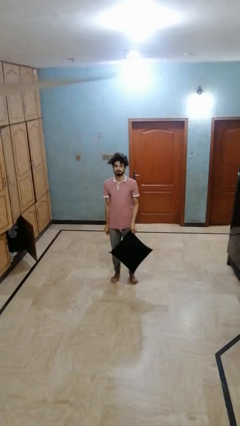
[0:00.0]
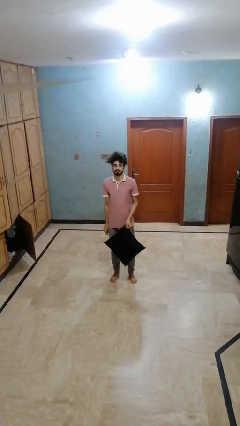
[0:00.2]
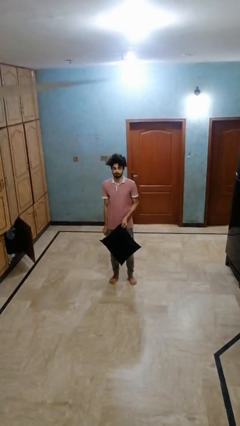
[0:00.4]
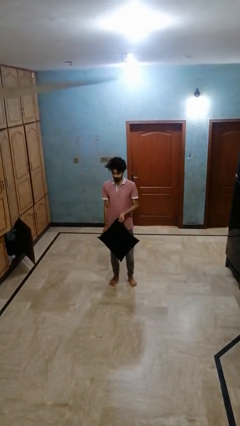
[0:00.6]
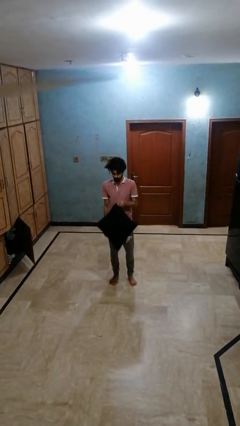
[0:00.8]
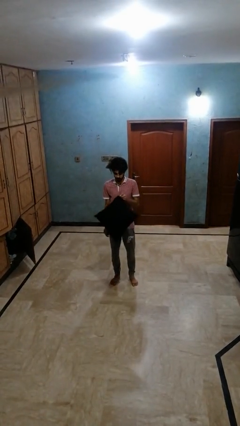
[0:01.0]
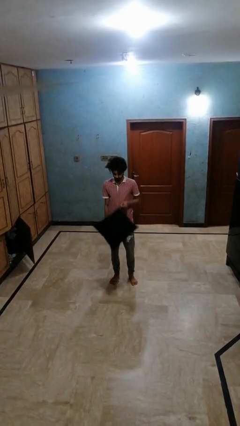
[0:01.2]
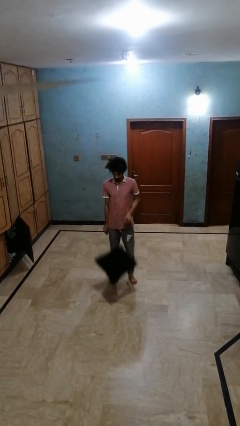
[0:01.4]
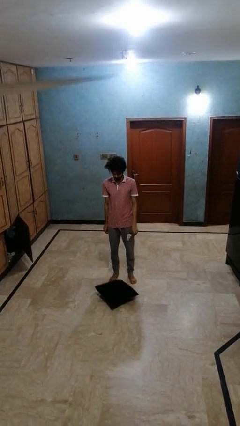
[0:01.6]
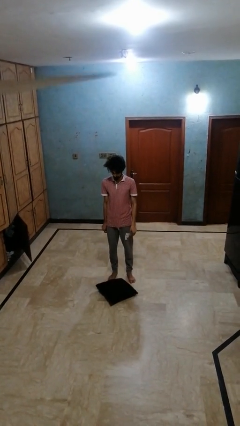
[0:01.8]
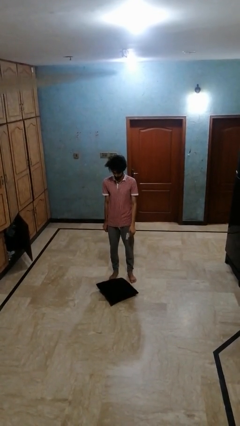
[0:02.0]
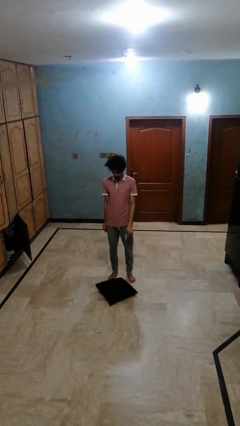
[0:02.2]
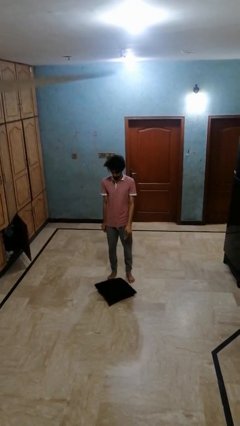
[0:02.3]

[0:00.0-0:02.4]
person throws object to ground

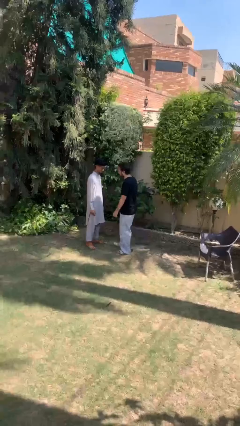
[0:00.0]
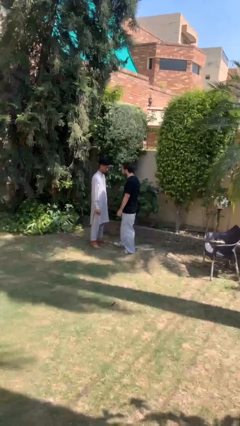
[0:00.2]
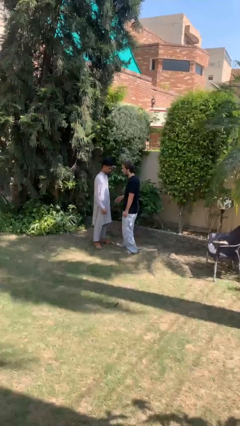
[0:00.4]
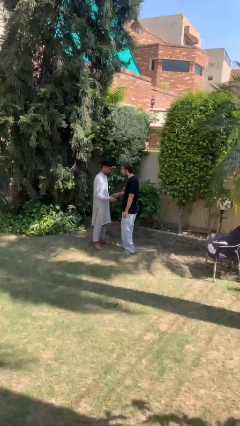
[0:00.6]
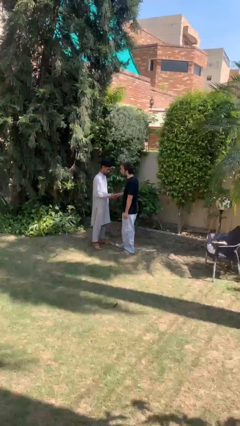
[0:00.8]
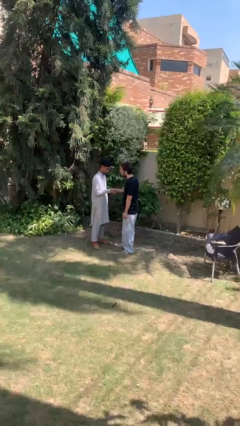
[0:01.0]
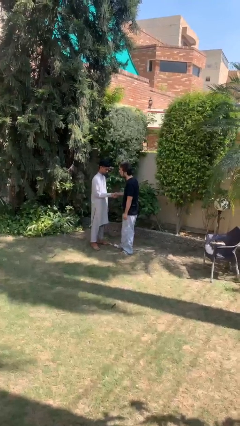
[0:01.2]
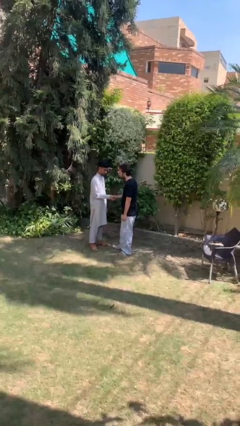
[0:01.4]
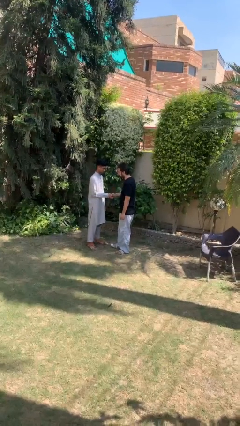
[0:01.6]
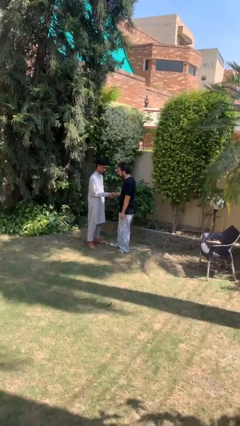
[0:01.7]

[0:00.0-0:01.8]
person shakes hand

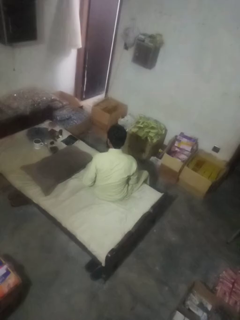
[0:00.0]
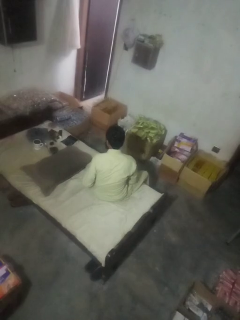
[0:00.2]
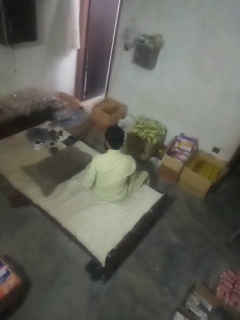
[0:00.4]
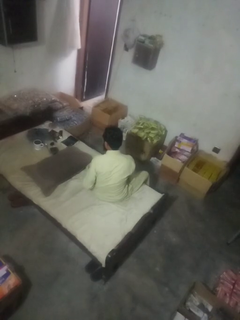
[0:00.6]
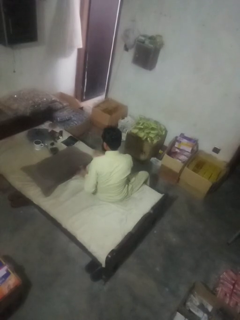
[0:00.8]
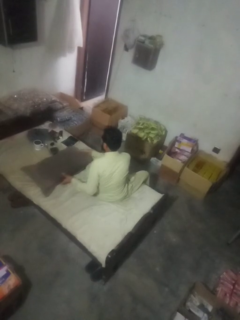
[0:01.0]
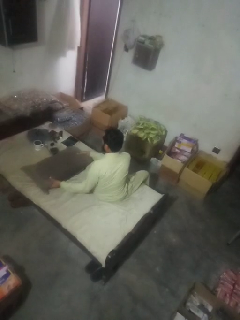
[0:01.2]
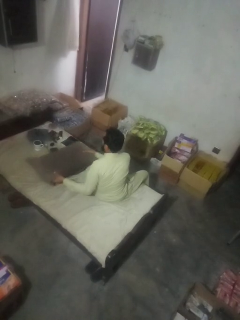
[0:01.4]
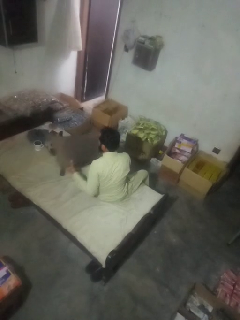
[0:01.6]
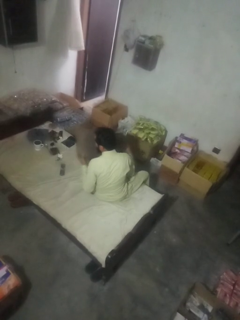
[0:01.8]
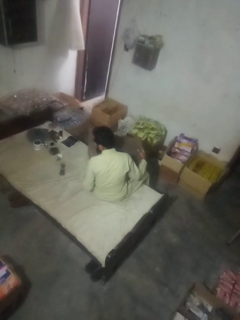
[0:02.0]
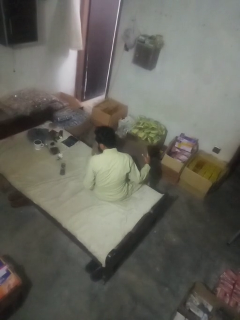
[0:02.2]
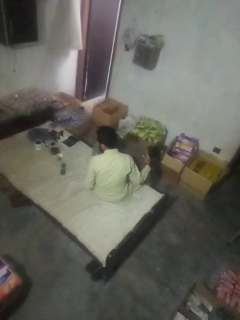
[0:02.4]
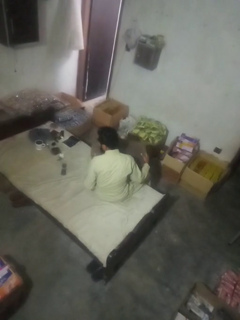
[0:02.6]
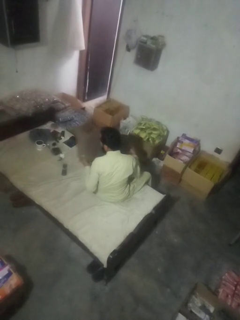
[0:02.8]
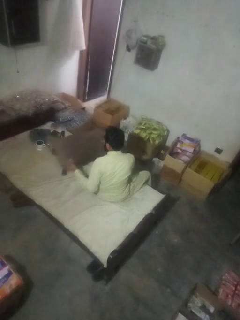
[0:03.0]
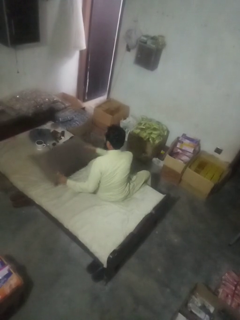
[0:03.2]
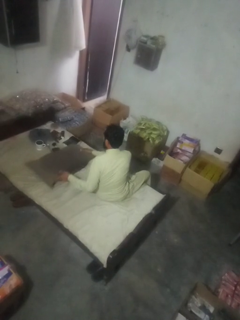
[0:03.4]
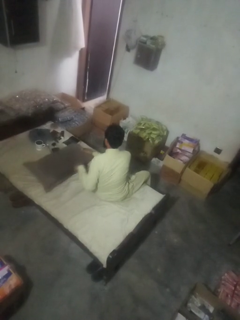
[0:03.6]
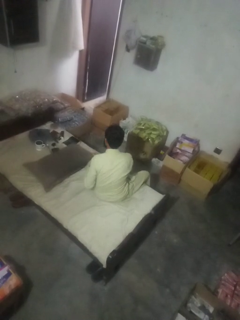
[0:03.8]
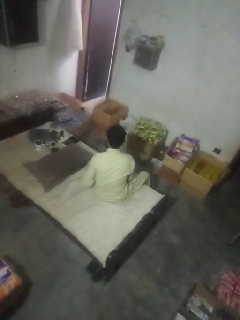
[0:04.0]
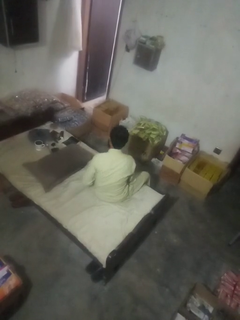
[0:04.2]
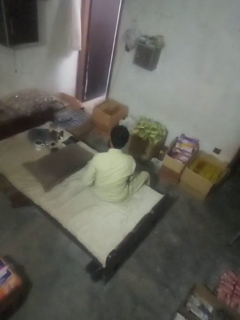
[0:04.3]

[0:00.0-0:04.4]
person searches in couch

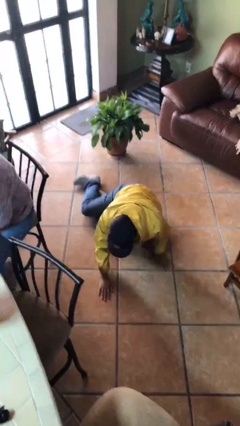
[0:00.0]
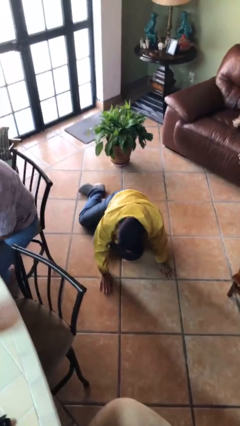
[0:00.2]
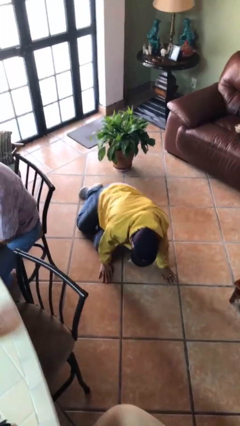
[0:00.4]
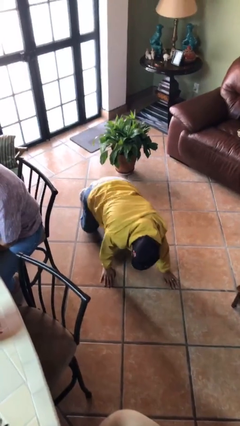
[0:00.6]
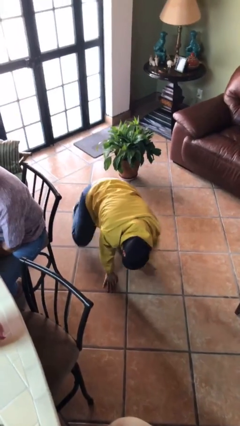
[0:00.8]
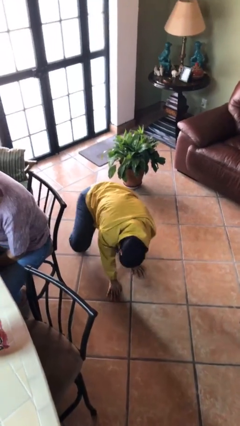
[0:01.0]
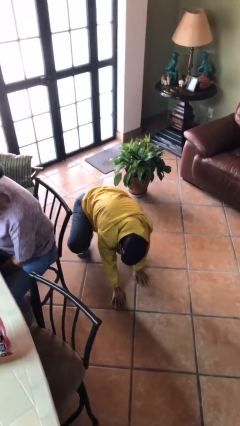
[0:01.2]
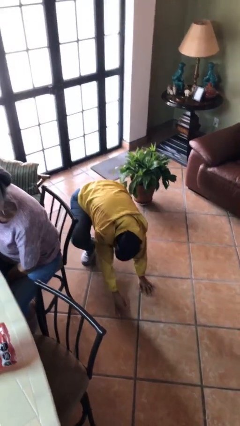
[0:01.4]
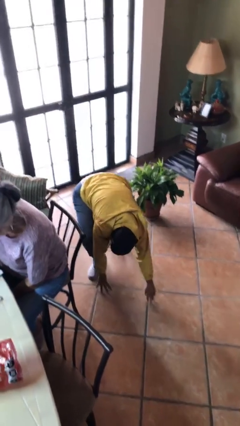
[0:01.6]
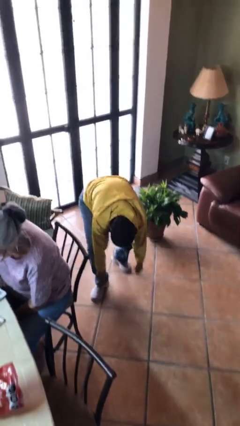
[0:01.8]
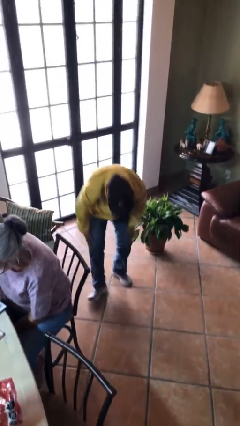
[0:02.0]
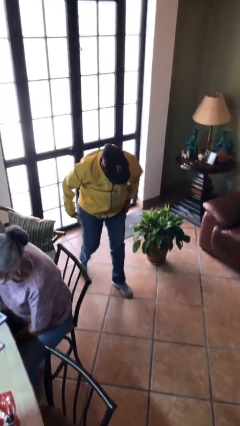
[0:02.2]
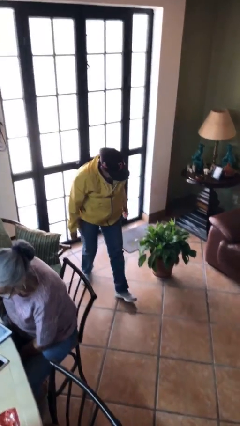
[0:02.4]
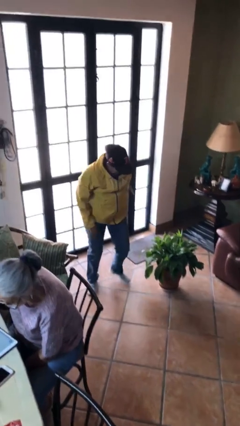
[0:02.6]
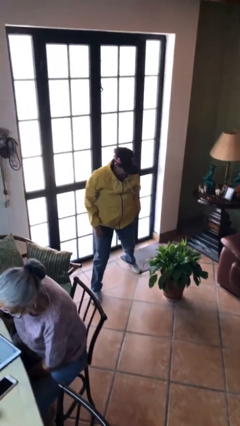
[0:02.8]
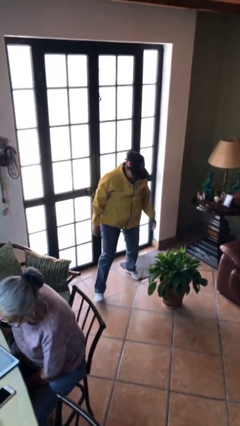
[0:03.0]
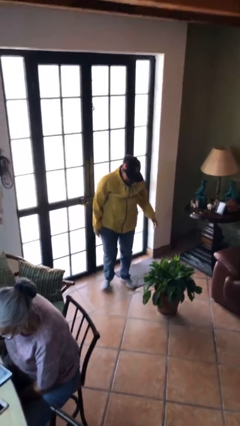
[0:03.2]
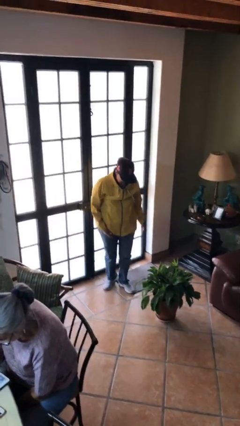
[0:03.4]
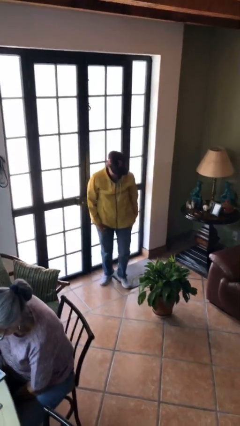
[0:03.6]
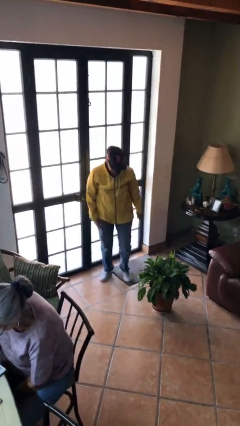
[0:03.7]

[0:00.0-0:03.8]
person stands up from floor

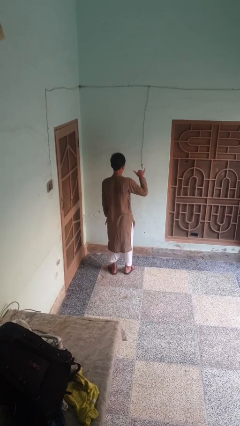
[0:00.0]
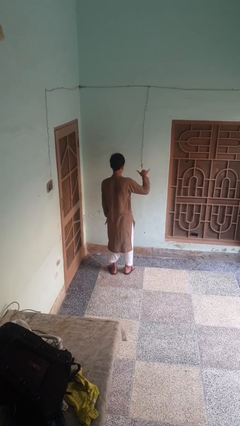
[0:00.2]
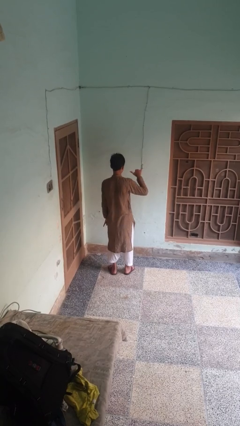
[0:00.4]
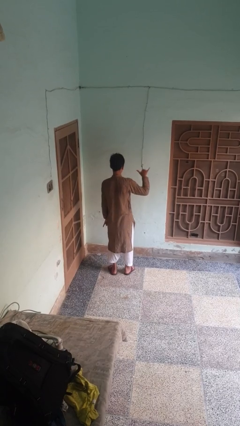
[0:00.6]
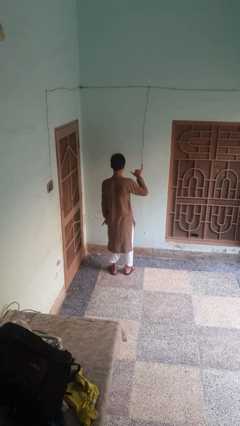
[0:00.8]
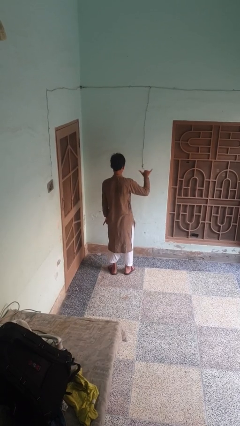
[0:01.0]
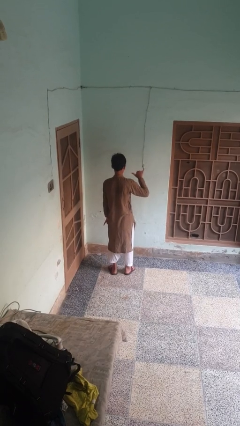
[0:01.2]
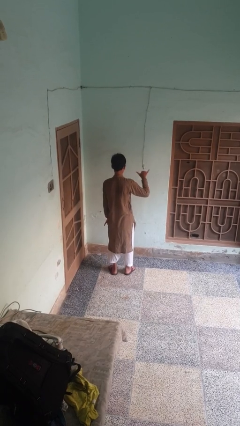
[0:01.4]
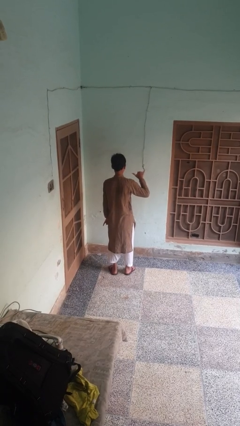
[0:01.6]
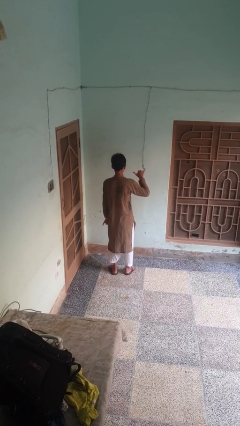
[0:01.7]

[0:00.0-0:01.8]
person gestures hang loose

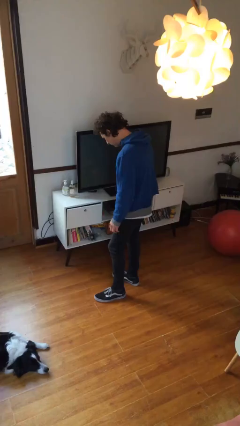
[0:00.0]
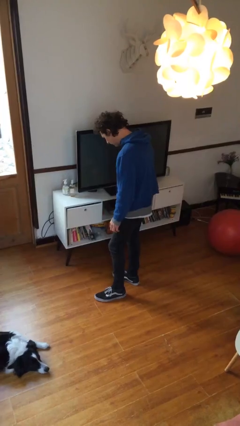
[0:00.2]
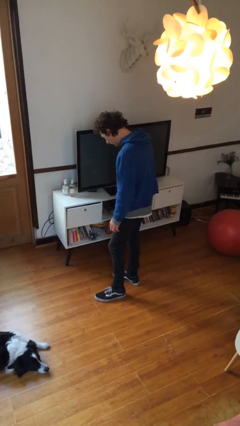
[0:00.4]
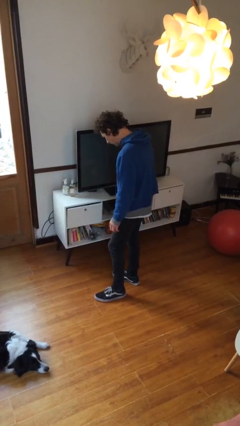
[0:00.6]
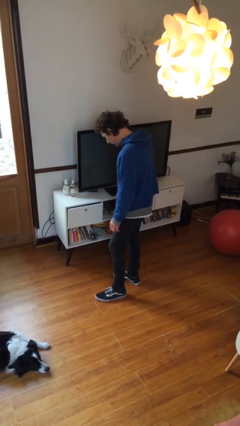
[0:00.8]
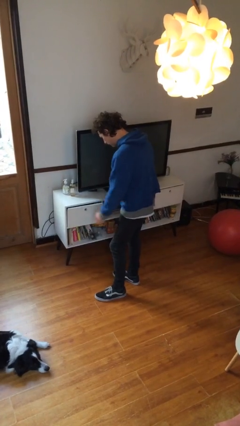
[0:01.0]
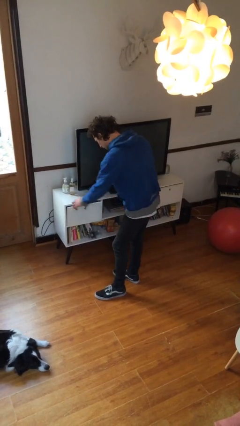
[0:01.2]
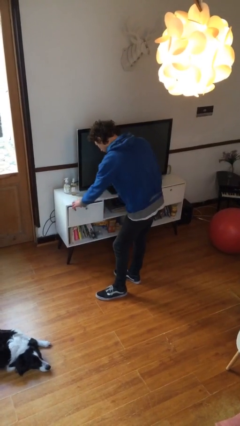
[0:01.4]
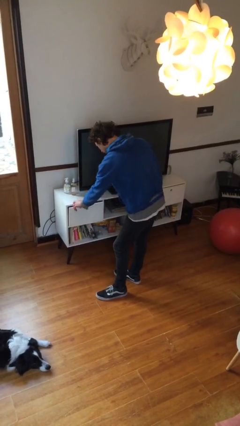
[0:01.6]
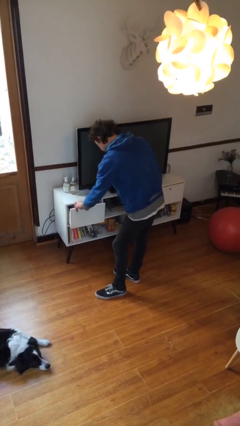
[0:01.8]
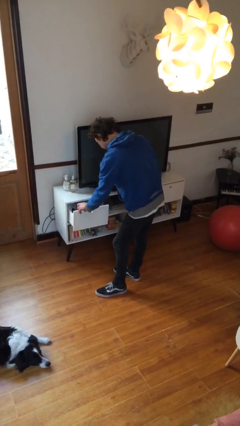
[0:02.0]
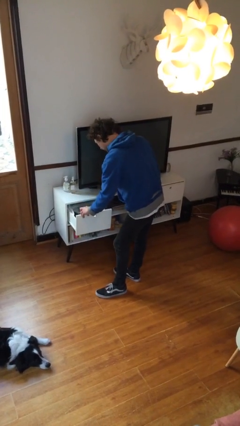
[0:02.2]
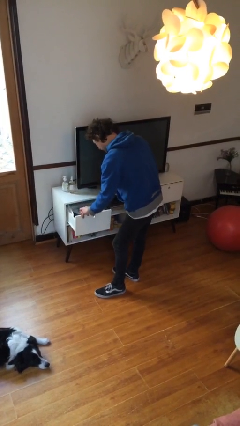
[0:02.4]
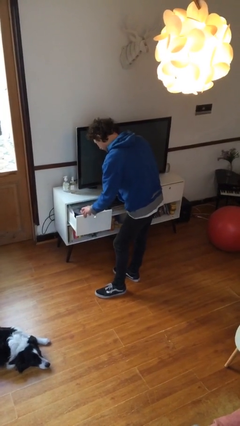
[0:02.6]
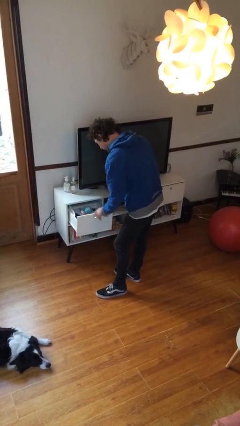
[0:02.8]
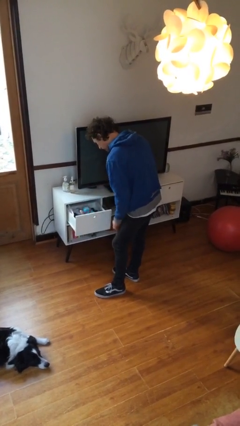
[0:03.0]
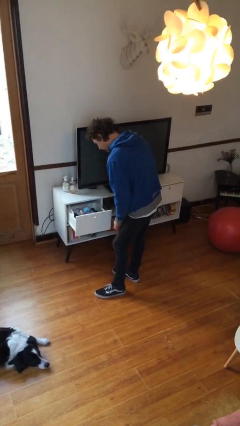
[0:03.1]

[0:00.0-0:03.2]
person opens dresser drawer

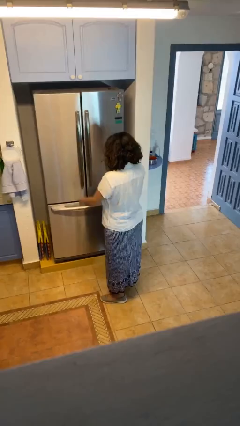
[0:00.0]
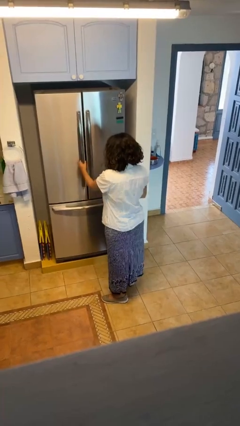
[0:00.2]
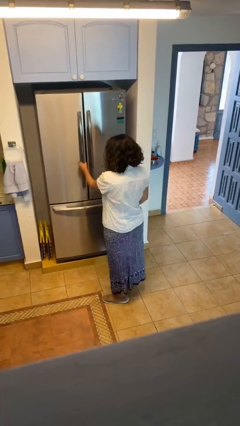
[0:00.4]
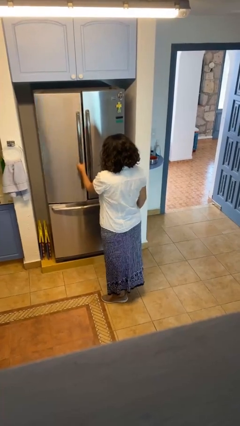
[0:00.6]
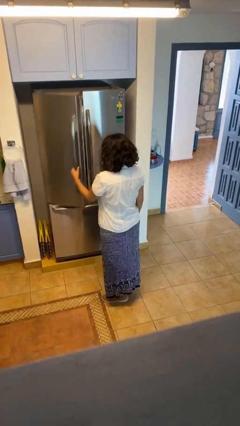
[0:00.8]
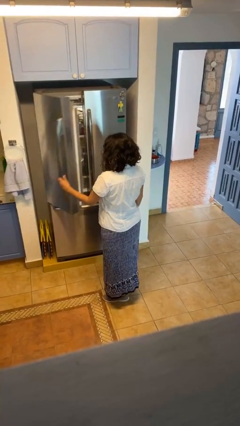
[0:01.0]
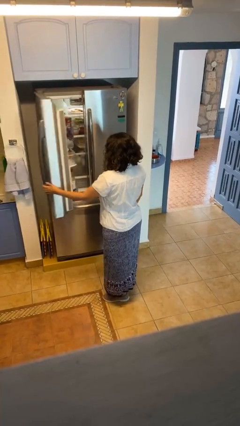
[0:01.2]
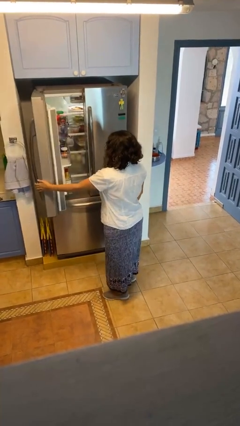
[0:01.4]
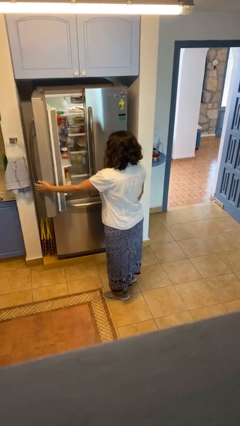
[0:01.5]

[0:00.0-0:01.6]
person opens refrigerator
